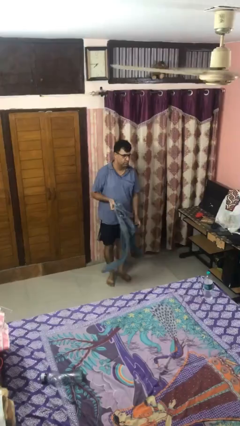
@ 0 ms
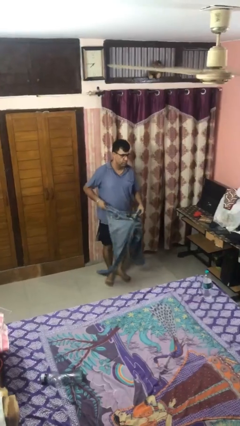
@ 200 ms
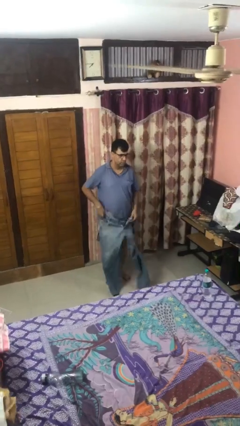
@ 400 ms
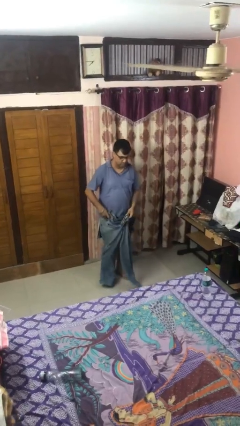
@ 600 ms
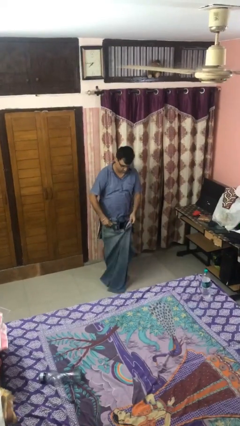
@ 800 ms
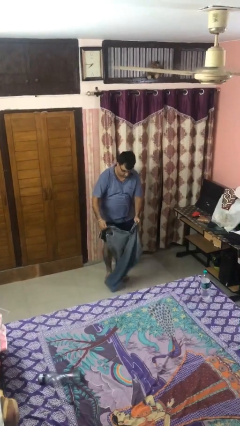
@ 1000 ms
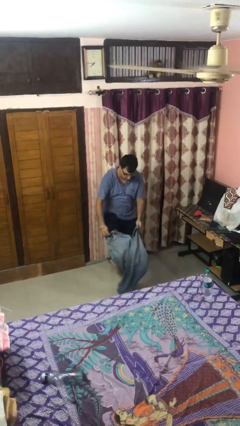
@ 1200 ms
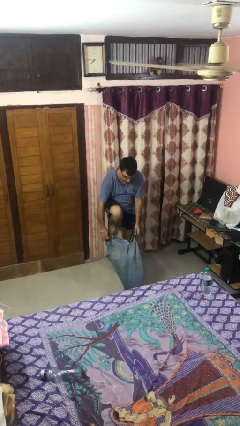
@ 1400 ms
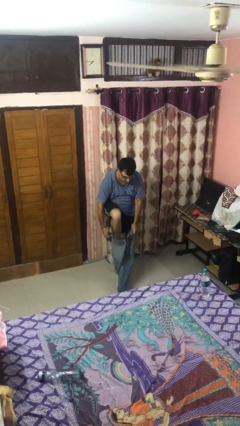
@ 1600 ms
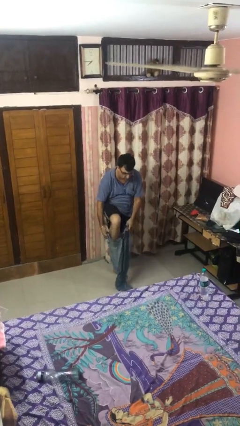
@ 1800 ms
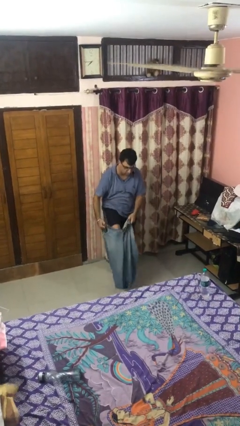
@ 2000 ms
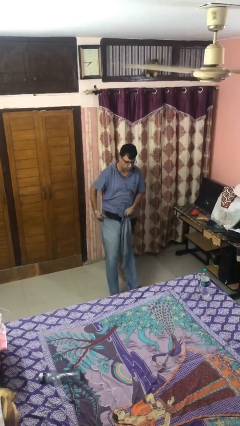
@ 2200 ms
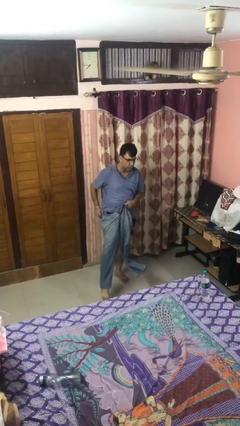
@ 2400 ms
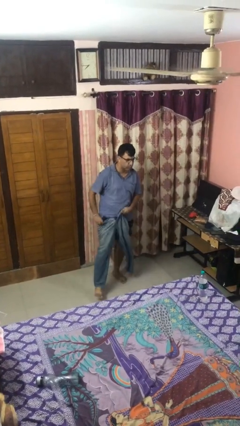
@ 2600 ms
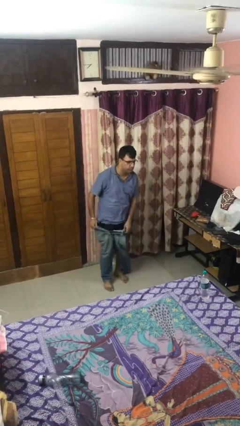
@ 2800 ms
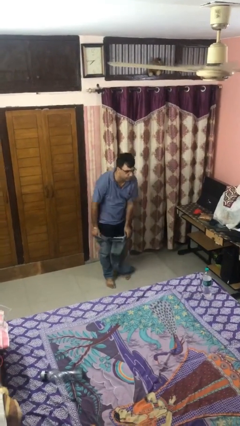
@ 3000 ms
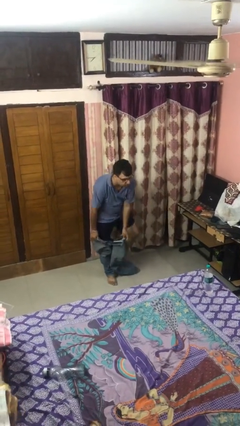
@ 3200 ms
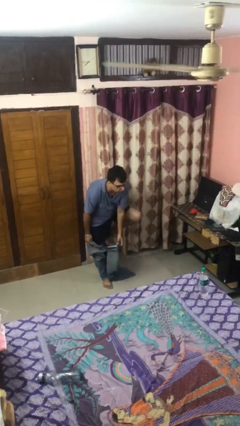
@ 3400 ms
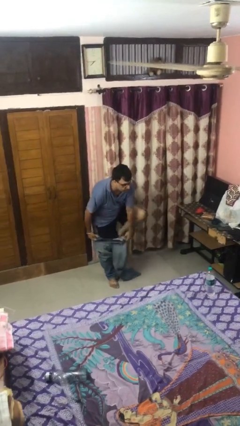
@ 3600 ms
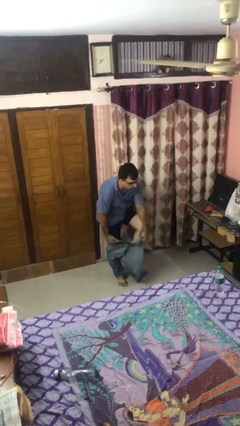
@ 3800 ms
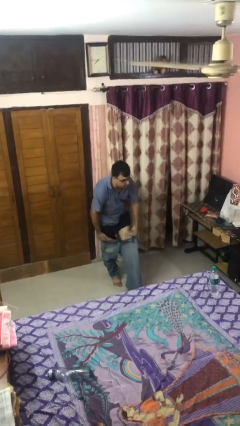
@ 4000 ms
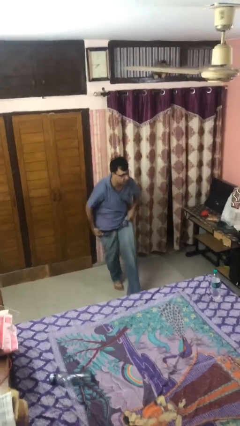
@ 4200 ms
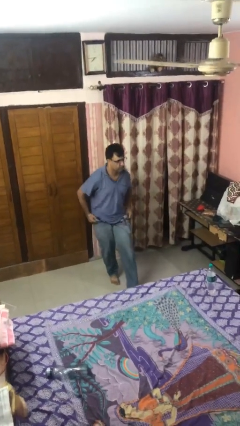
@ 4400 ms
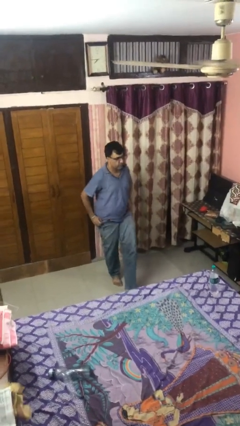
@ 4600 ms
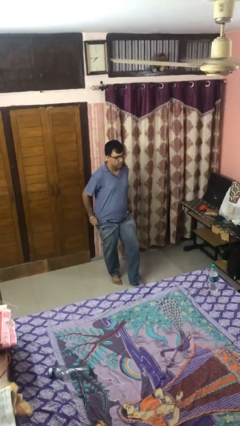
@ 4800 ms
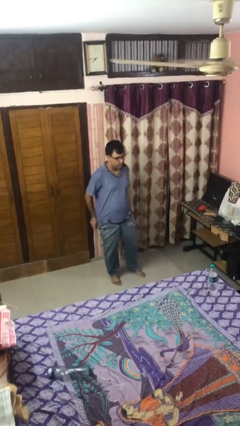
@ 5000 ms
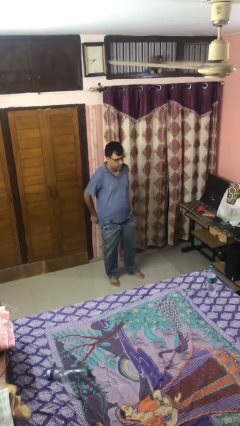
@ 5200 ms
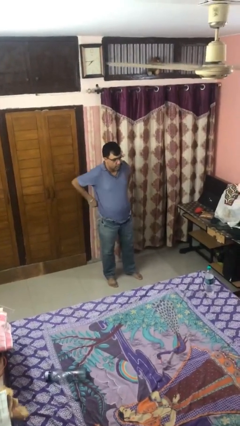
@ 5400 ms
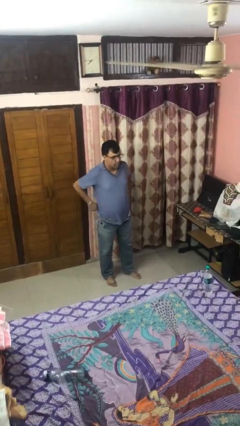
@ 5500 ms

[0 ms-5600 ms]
person puts on pants

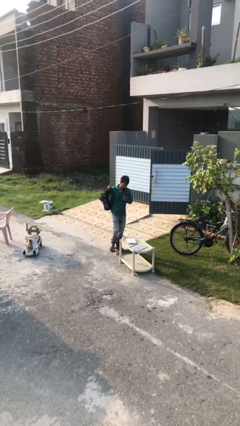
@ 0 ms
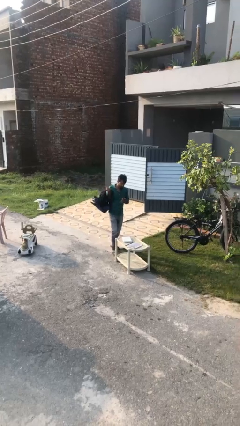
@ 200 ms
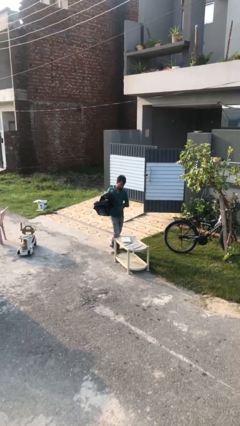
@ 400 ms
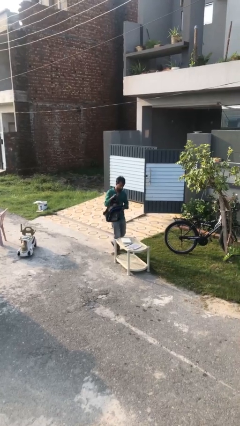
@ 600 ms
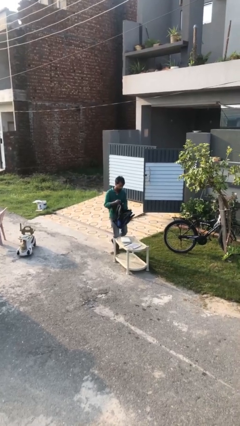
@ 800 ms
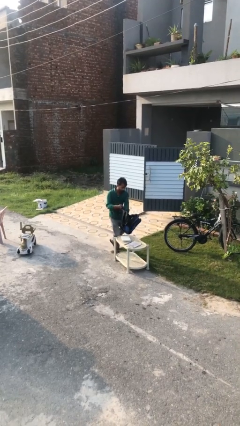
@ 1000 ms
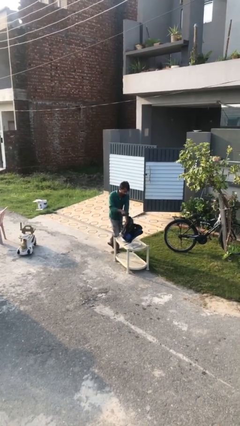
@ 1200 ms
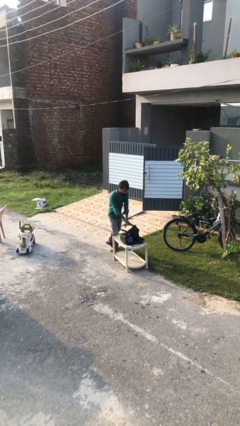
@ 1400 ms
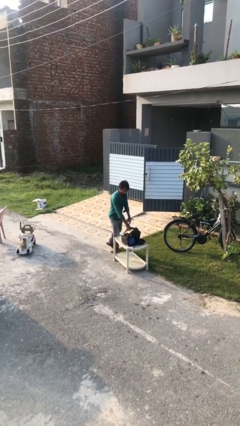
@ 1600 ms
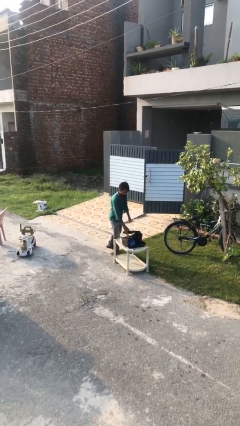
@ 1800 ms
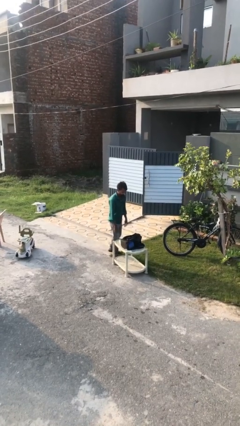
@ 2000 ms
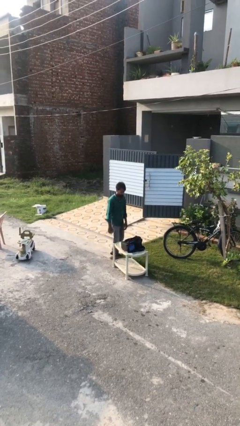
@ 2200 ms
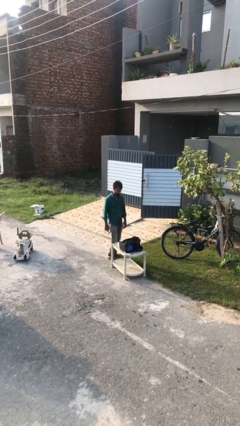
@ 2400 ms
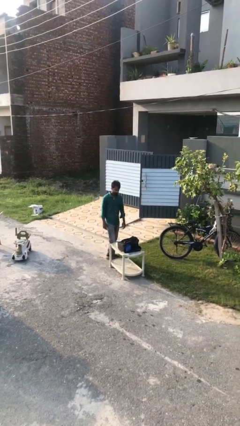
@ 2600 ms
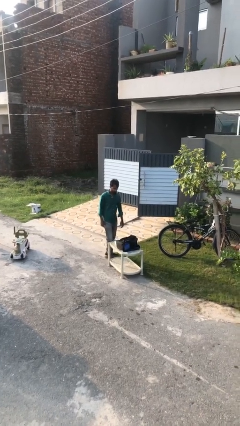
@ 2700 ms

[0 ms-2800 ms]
person puts down object on table

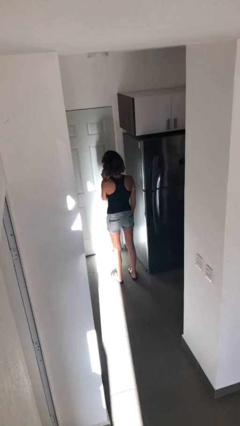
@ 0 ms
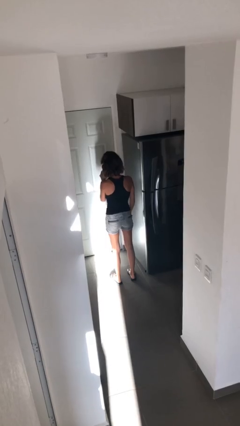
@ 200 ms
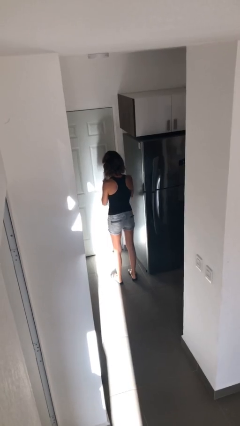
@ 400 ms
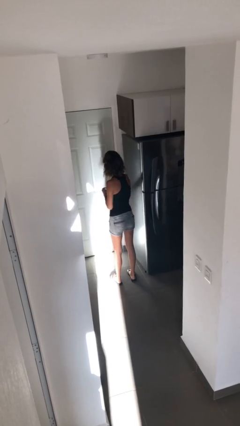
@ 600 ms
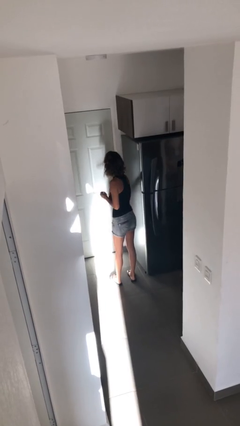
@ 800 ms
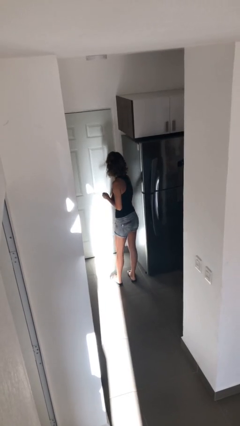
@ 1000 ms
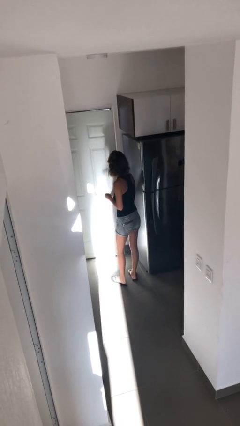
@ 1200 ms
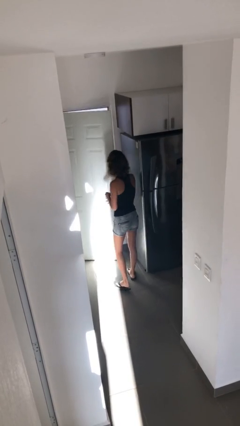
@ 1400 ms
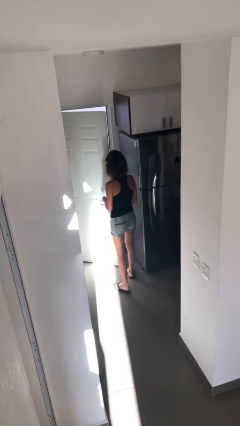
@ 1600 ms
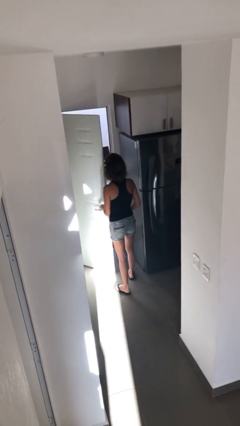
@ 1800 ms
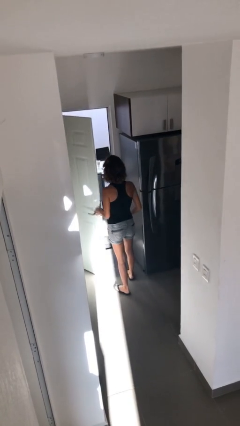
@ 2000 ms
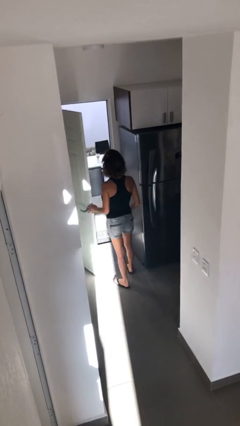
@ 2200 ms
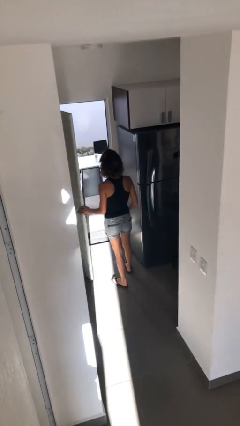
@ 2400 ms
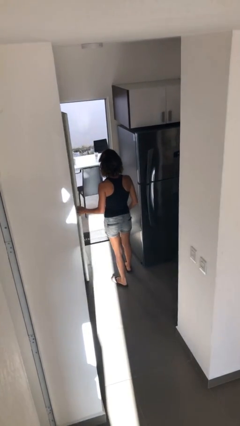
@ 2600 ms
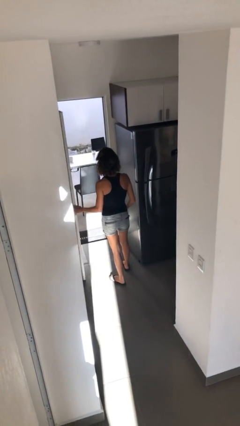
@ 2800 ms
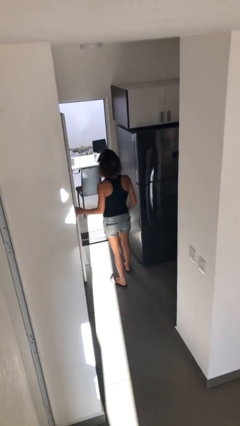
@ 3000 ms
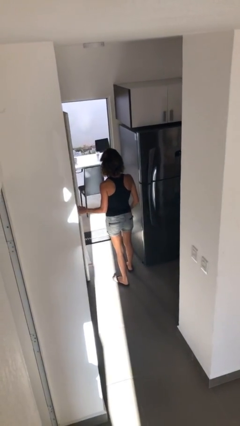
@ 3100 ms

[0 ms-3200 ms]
person opens facility door

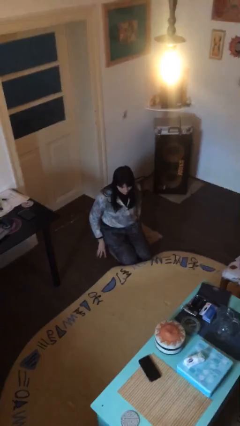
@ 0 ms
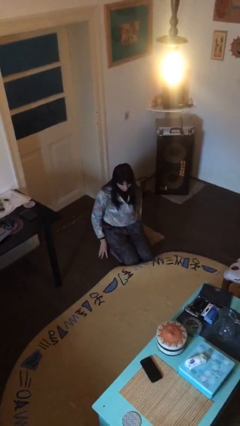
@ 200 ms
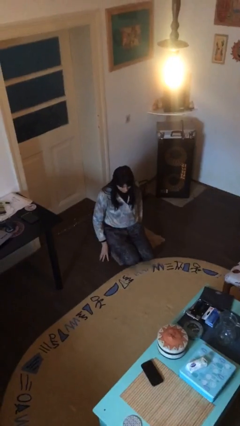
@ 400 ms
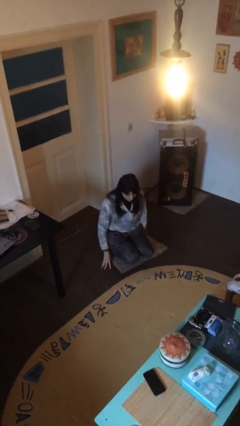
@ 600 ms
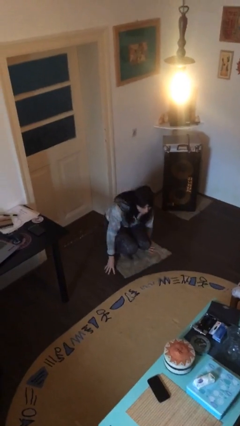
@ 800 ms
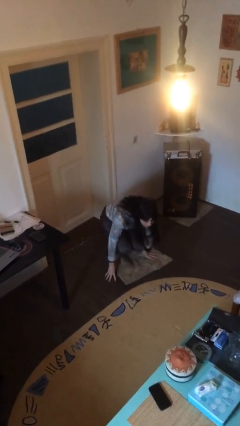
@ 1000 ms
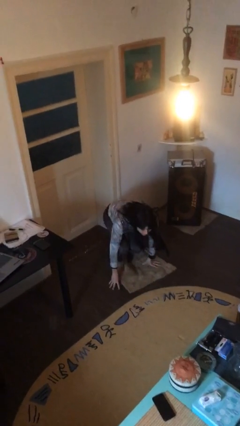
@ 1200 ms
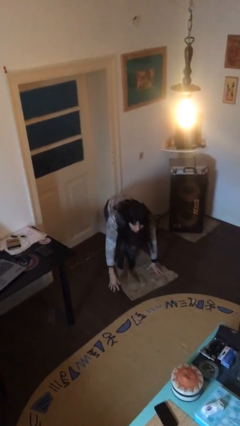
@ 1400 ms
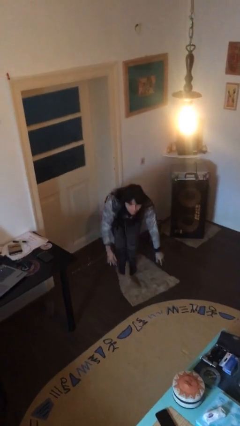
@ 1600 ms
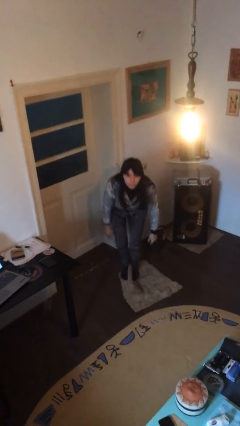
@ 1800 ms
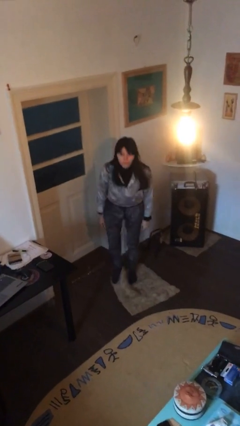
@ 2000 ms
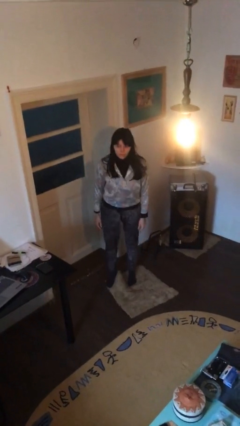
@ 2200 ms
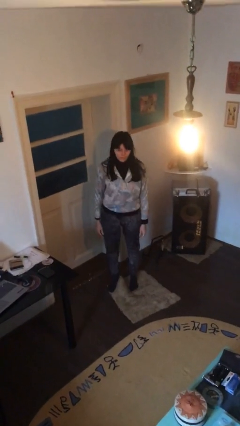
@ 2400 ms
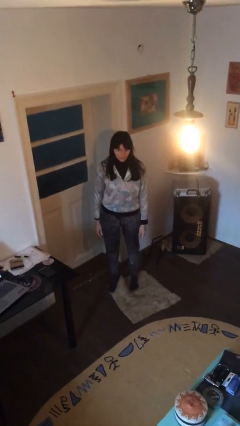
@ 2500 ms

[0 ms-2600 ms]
person stands up

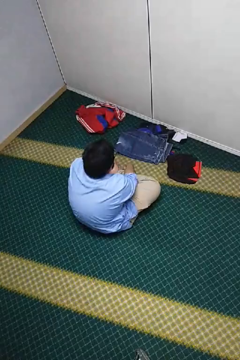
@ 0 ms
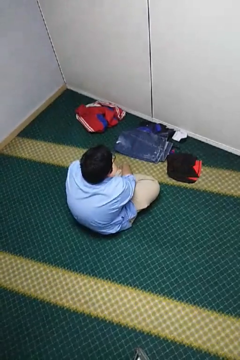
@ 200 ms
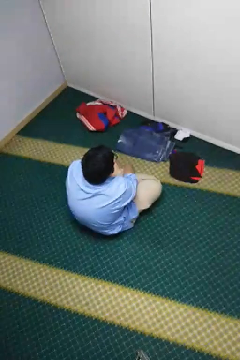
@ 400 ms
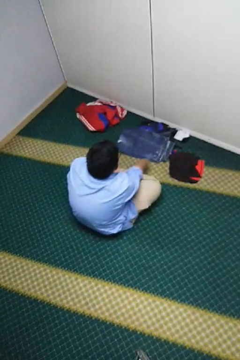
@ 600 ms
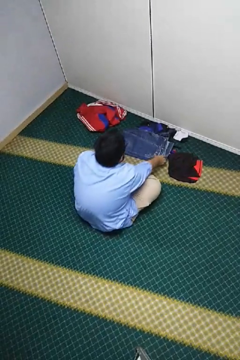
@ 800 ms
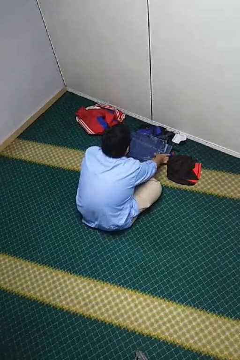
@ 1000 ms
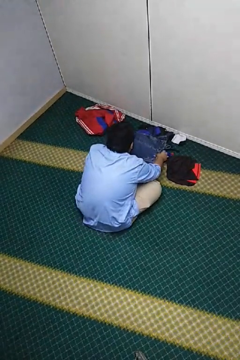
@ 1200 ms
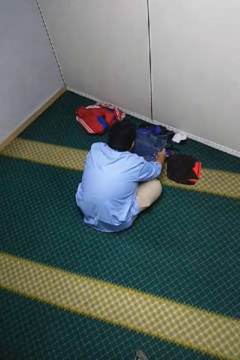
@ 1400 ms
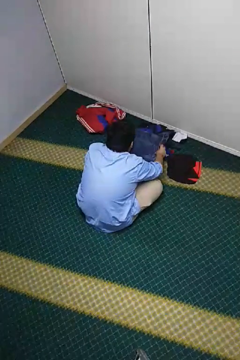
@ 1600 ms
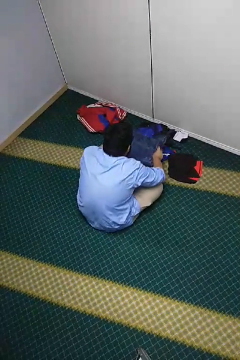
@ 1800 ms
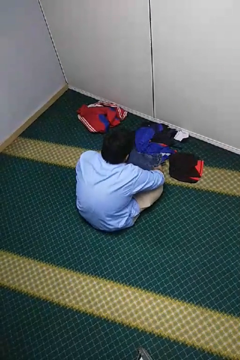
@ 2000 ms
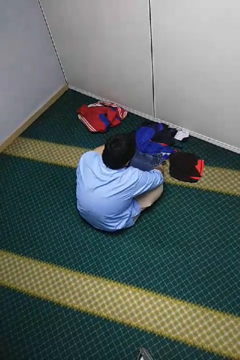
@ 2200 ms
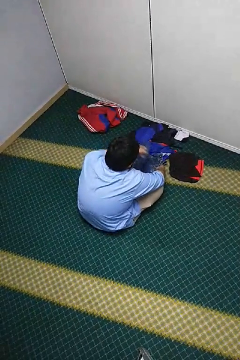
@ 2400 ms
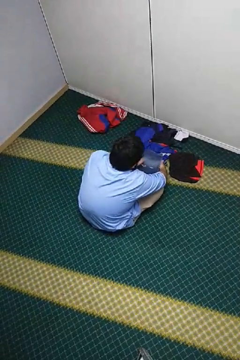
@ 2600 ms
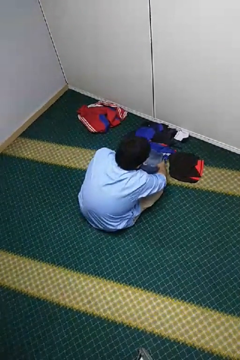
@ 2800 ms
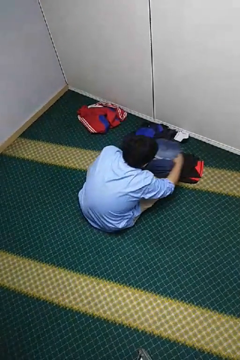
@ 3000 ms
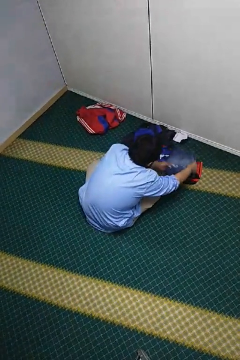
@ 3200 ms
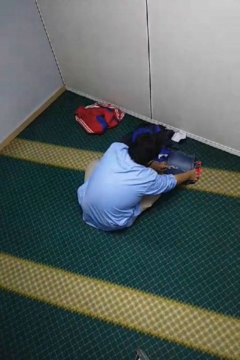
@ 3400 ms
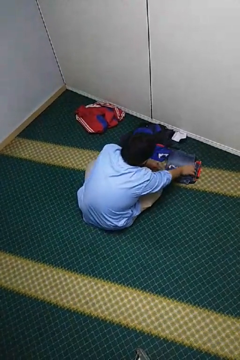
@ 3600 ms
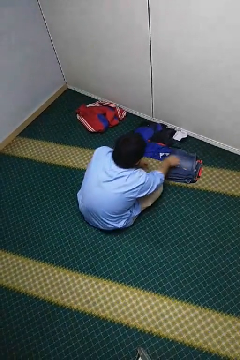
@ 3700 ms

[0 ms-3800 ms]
person folds pants

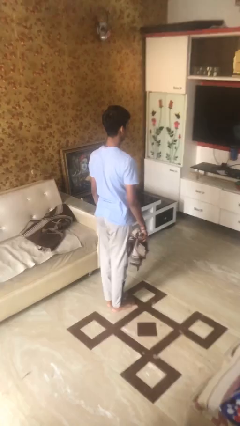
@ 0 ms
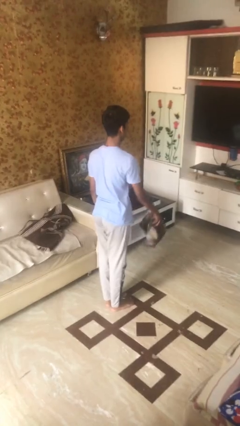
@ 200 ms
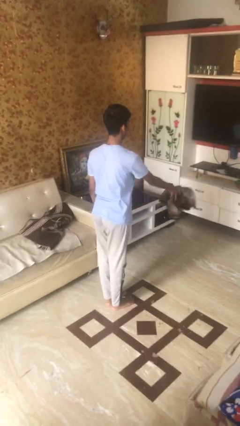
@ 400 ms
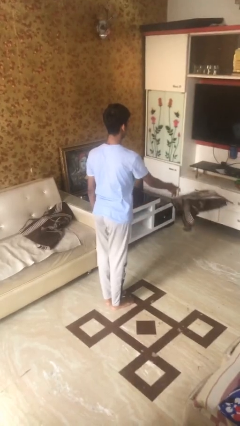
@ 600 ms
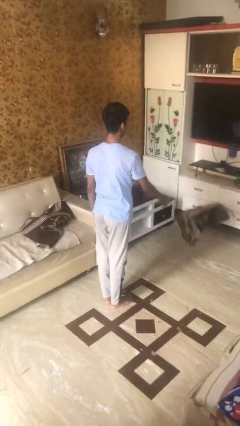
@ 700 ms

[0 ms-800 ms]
person throws object to ground
